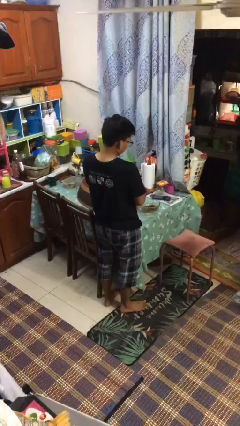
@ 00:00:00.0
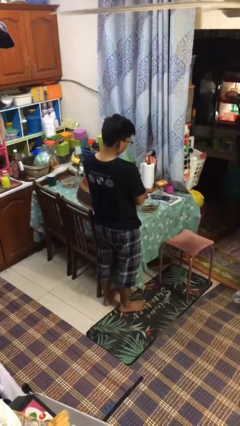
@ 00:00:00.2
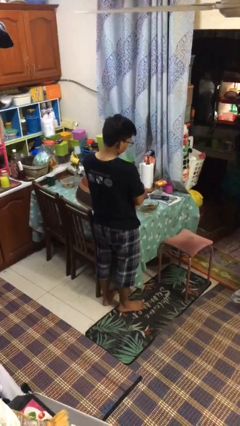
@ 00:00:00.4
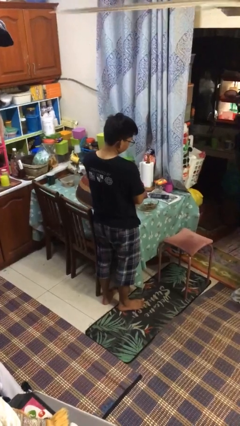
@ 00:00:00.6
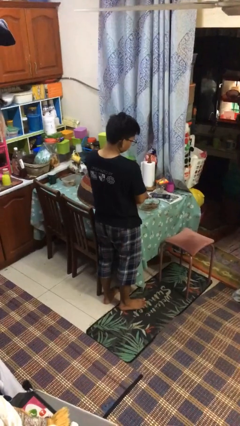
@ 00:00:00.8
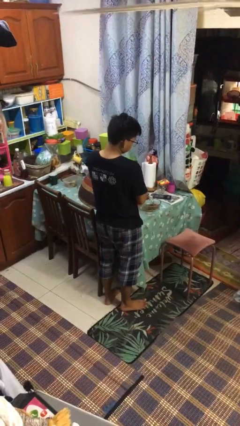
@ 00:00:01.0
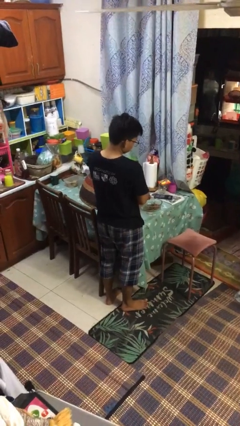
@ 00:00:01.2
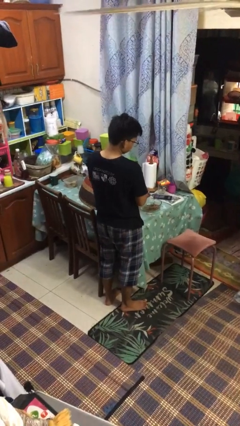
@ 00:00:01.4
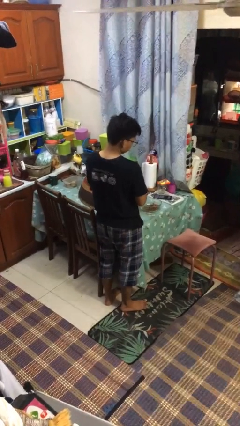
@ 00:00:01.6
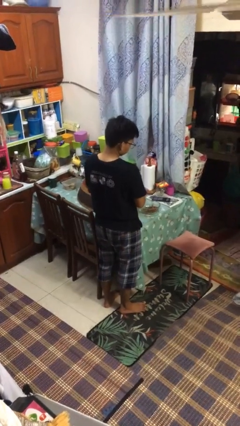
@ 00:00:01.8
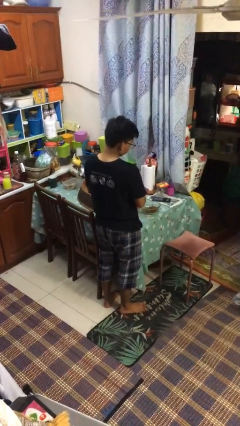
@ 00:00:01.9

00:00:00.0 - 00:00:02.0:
person pours into bowl

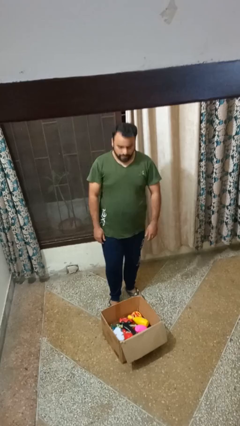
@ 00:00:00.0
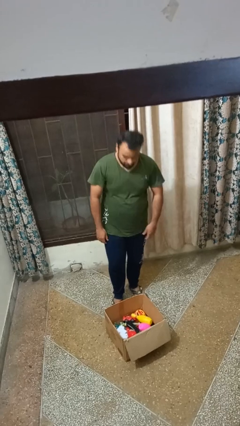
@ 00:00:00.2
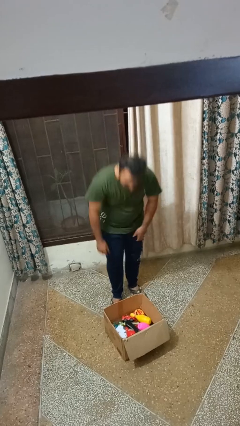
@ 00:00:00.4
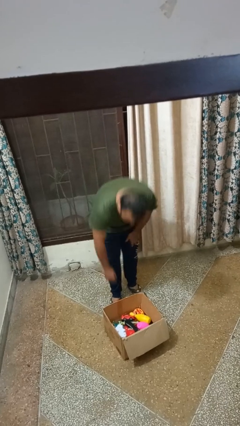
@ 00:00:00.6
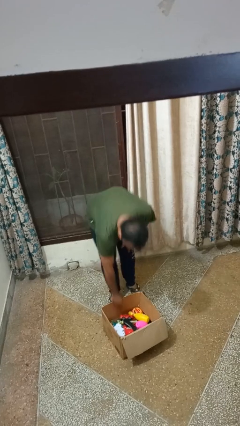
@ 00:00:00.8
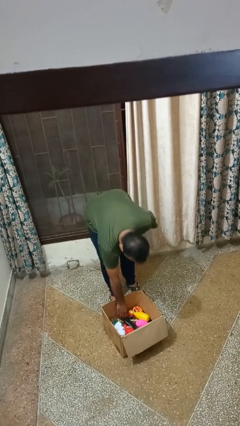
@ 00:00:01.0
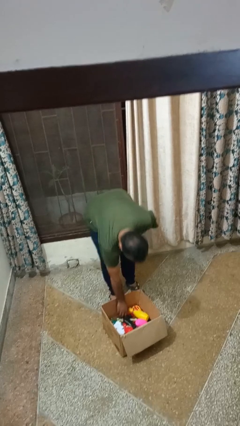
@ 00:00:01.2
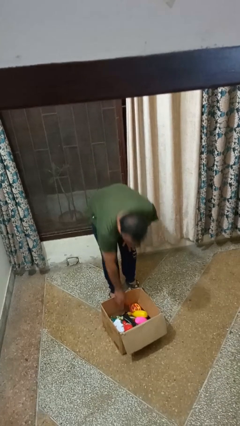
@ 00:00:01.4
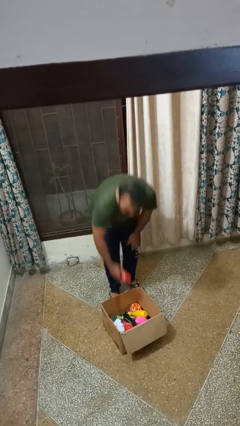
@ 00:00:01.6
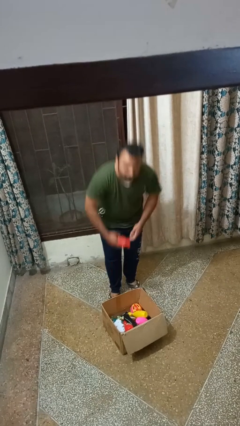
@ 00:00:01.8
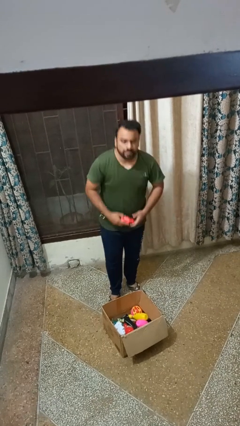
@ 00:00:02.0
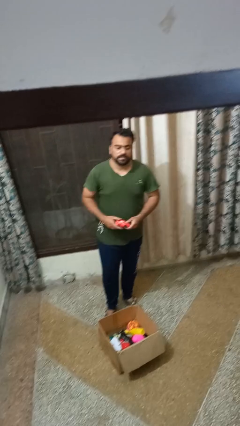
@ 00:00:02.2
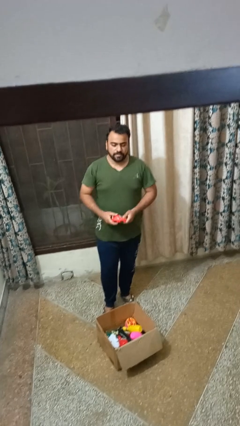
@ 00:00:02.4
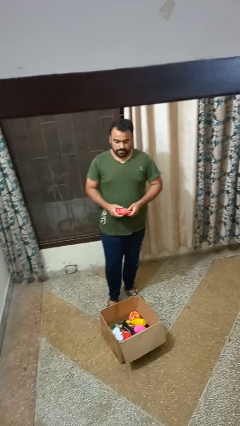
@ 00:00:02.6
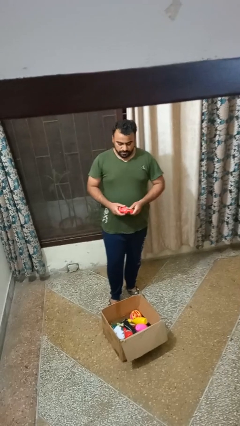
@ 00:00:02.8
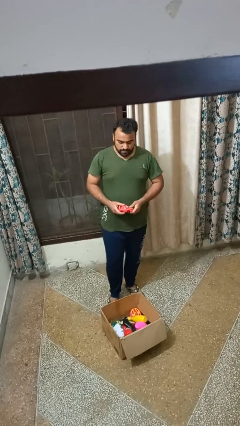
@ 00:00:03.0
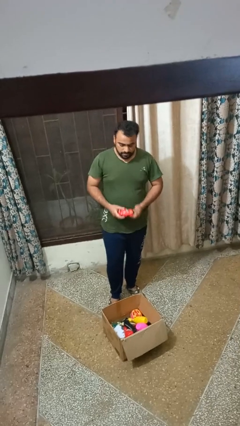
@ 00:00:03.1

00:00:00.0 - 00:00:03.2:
person takes object from box

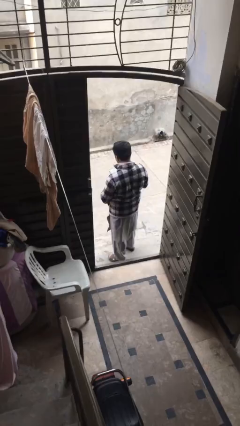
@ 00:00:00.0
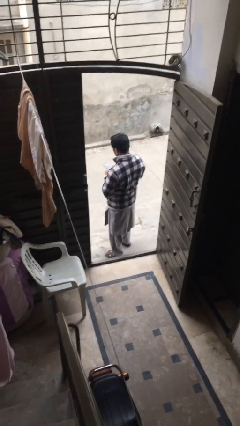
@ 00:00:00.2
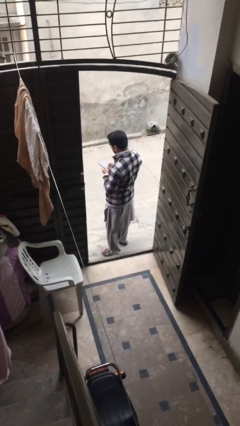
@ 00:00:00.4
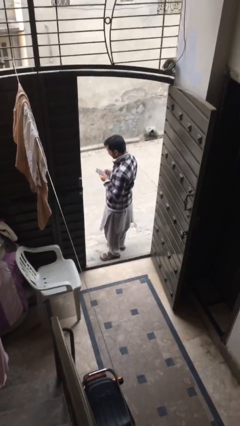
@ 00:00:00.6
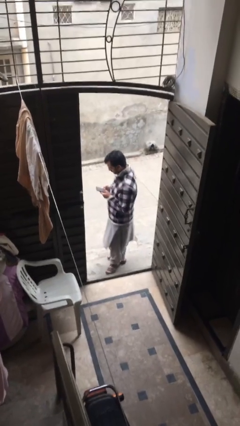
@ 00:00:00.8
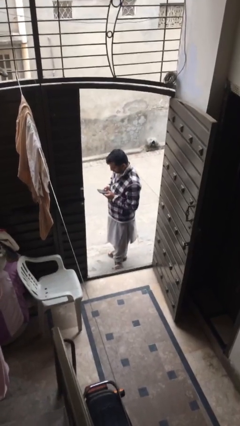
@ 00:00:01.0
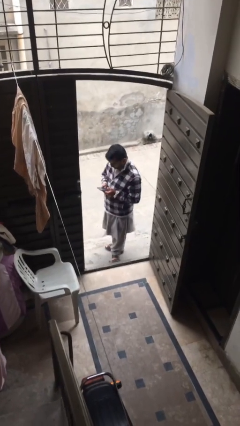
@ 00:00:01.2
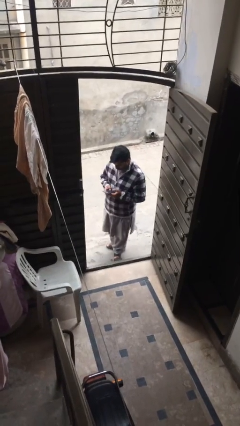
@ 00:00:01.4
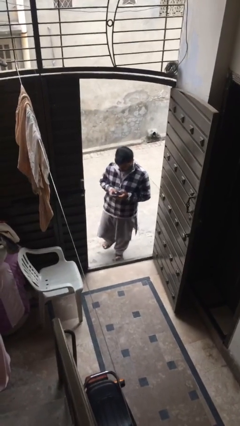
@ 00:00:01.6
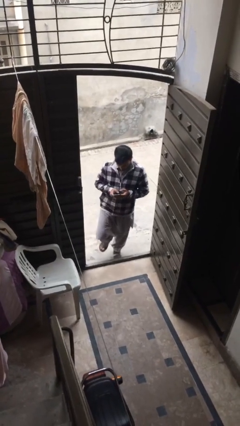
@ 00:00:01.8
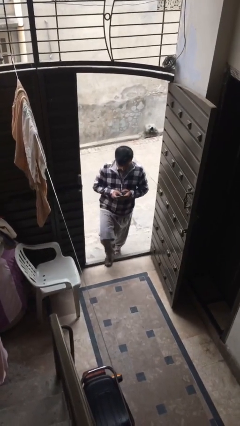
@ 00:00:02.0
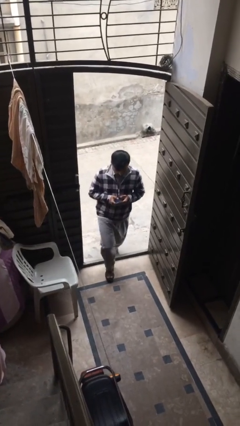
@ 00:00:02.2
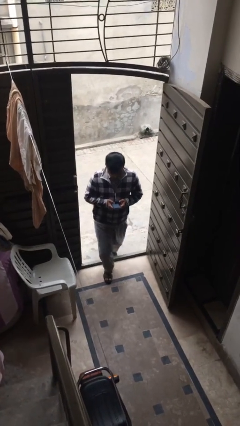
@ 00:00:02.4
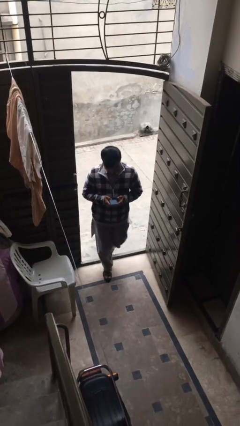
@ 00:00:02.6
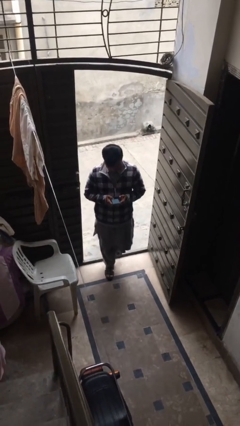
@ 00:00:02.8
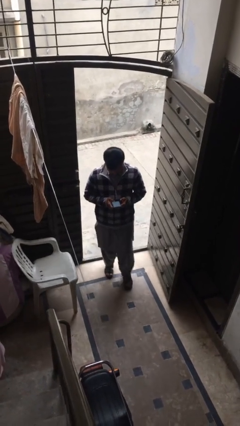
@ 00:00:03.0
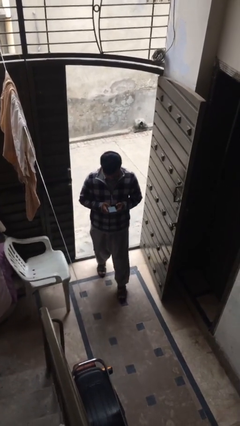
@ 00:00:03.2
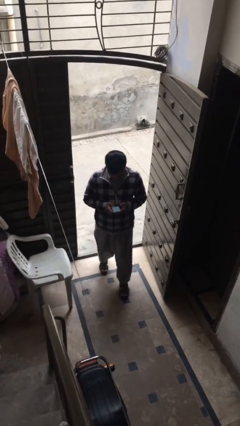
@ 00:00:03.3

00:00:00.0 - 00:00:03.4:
person enters scene through structure

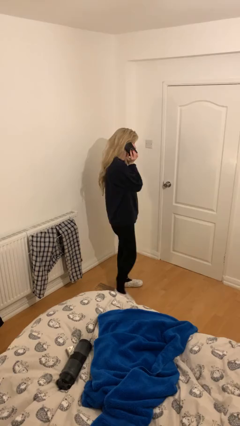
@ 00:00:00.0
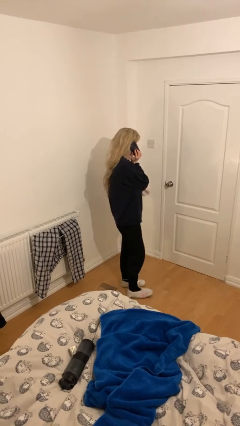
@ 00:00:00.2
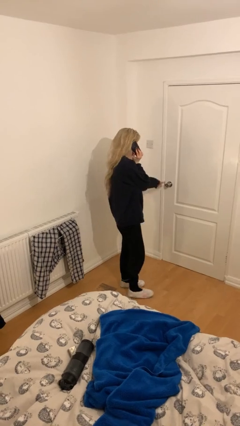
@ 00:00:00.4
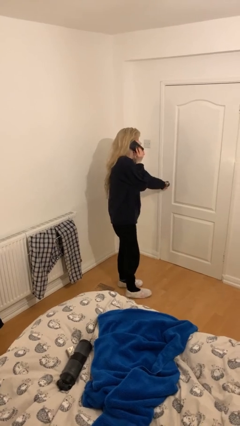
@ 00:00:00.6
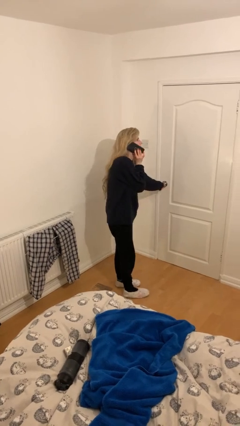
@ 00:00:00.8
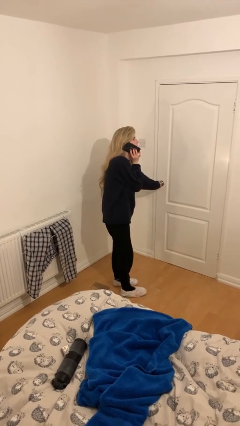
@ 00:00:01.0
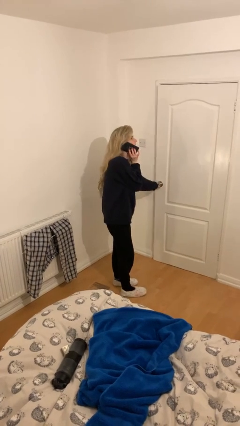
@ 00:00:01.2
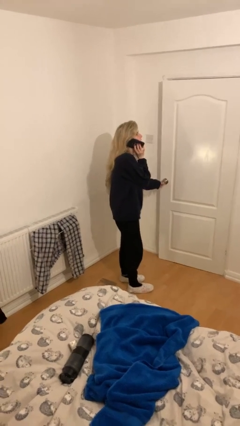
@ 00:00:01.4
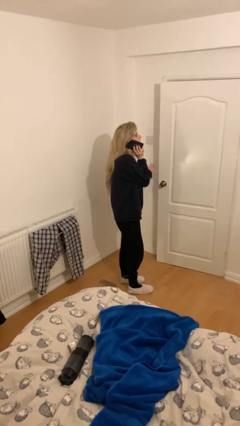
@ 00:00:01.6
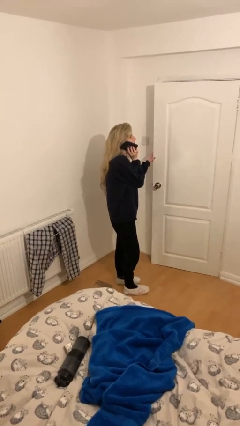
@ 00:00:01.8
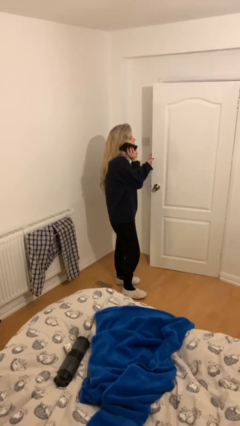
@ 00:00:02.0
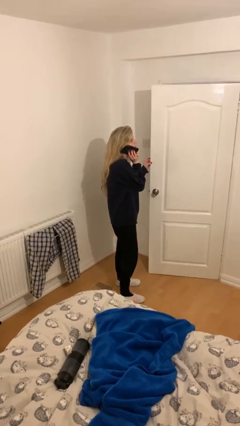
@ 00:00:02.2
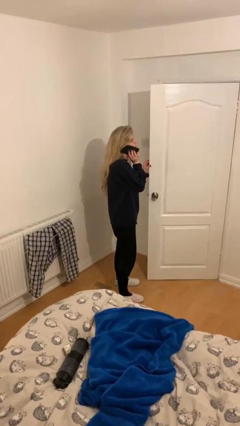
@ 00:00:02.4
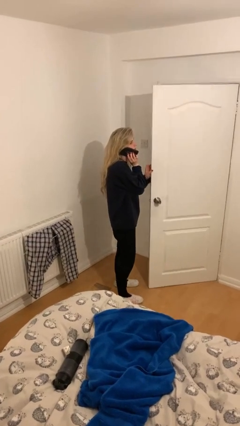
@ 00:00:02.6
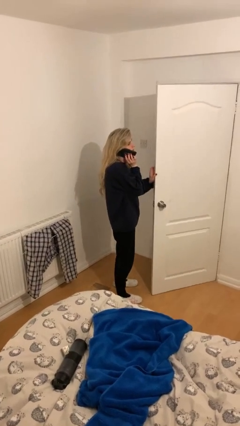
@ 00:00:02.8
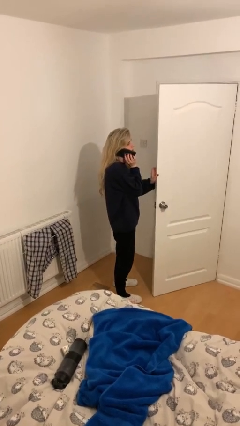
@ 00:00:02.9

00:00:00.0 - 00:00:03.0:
person opens facility door

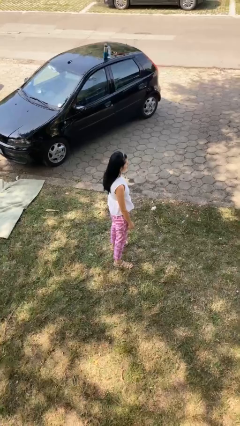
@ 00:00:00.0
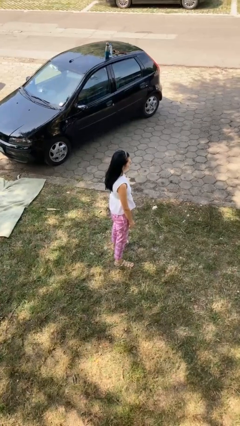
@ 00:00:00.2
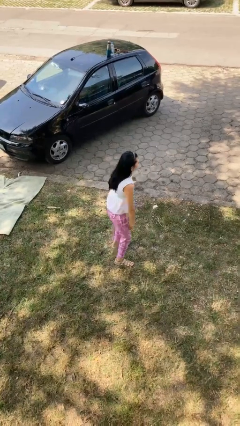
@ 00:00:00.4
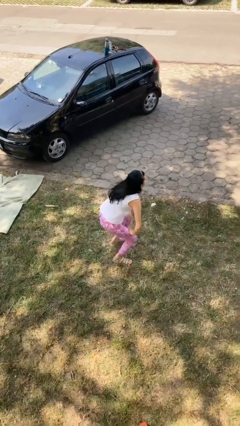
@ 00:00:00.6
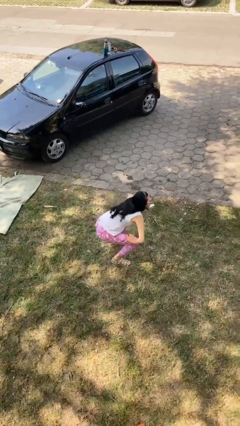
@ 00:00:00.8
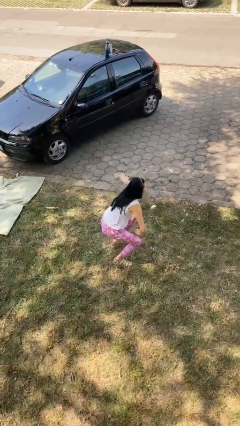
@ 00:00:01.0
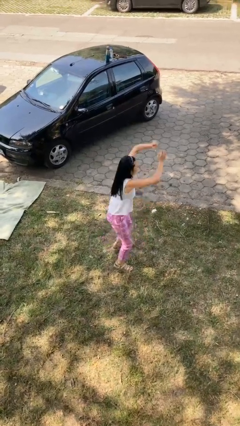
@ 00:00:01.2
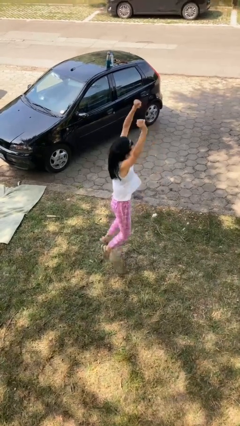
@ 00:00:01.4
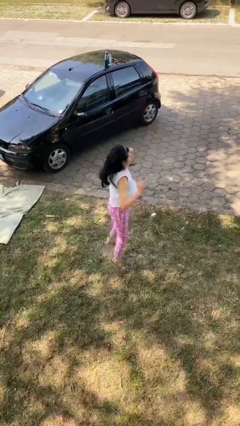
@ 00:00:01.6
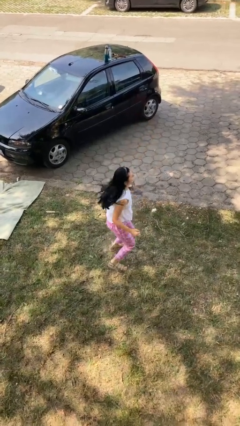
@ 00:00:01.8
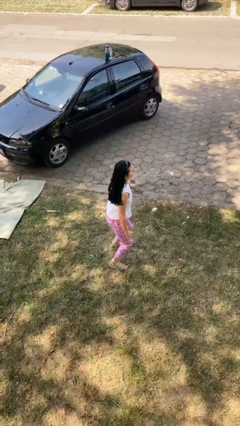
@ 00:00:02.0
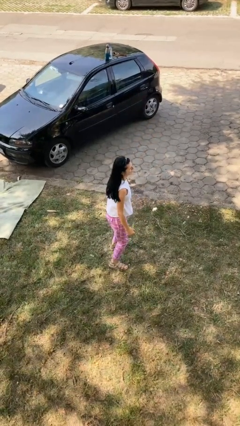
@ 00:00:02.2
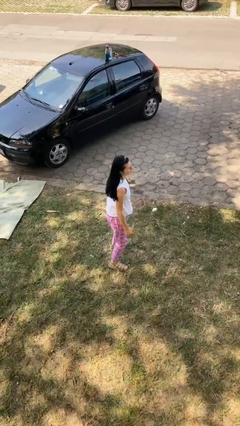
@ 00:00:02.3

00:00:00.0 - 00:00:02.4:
person jumps

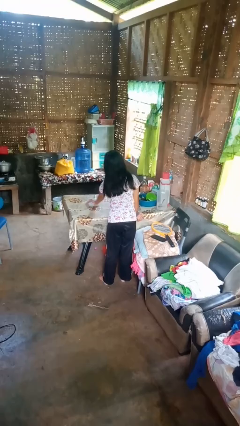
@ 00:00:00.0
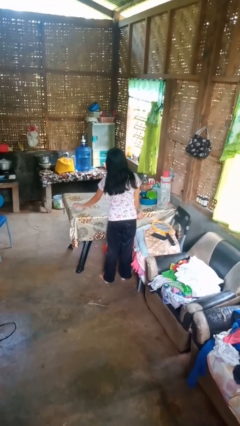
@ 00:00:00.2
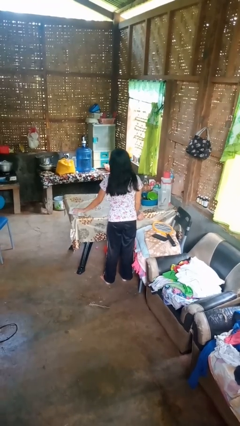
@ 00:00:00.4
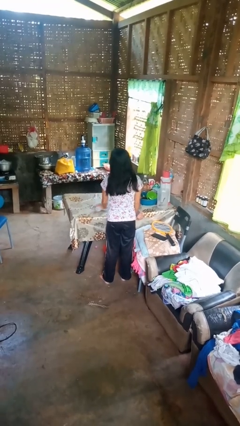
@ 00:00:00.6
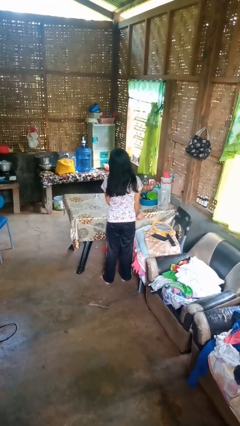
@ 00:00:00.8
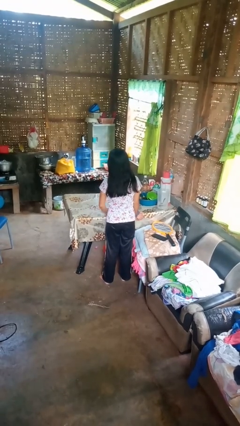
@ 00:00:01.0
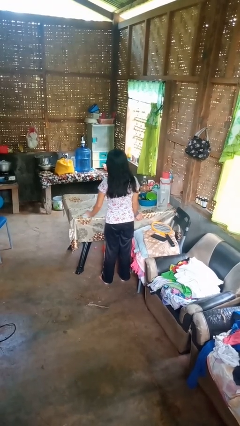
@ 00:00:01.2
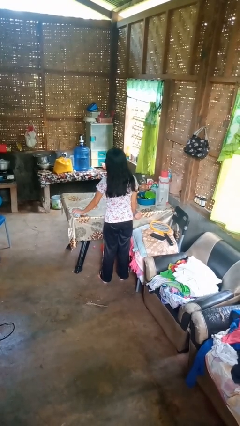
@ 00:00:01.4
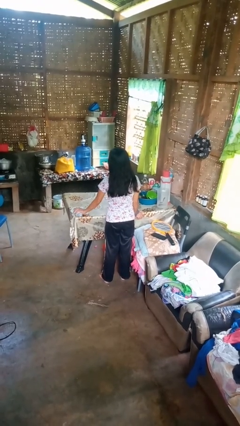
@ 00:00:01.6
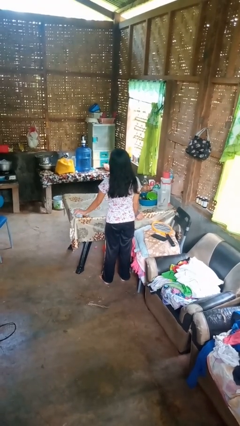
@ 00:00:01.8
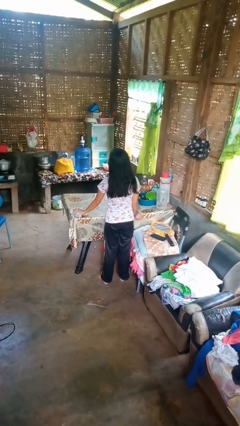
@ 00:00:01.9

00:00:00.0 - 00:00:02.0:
person cleans table with rag

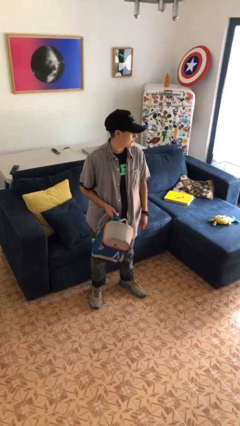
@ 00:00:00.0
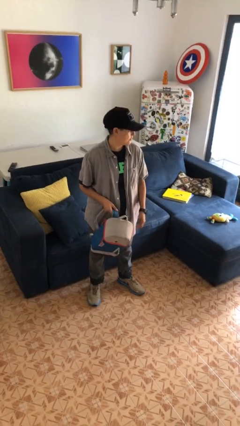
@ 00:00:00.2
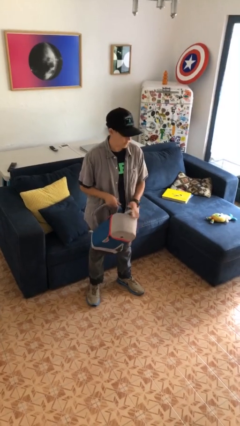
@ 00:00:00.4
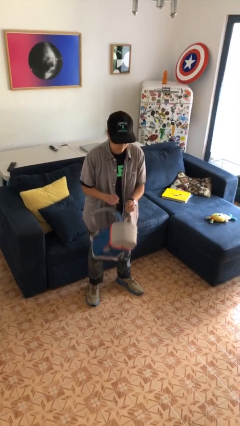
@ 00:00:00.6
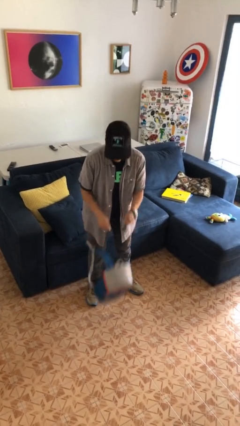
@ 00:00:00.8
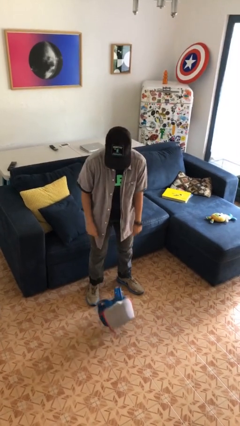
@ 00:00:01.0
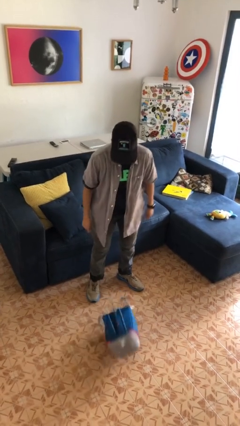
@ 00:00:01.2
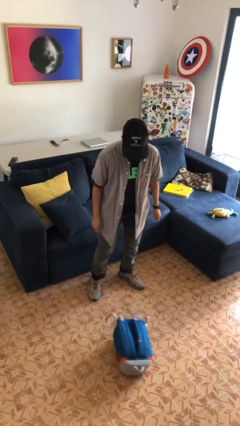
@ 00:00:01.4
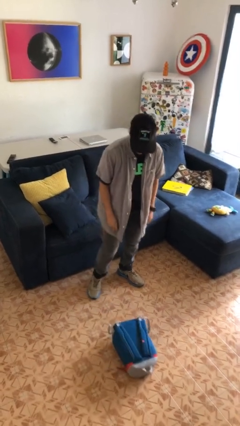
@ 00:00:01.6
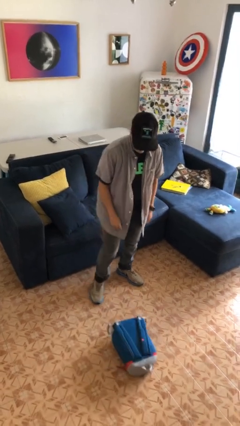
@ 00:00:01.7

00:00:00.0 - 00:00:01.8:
person drops object
